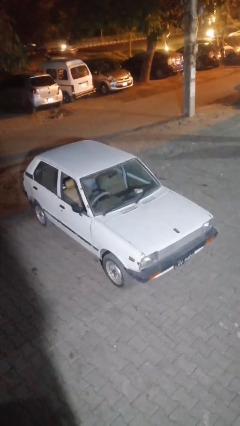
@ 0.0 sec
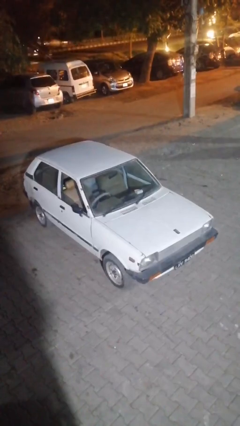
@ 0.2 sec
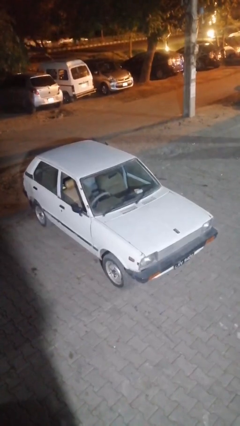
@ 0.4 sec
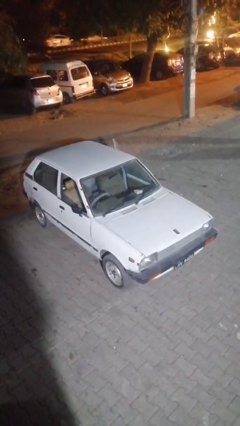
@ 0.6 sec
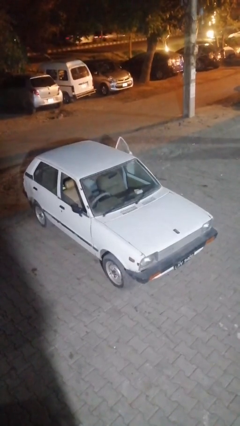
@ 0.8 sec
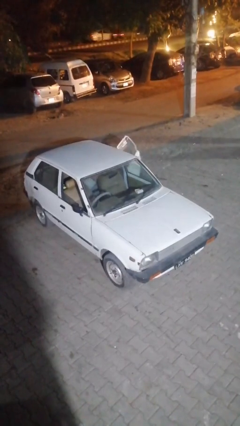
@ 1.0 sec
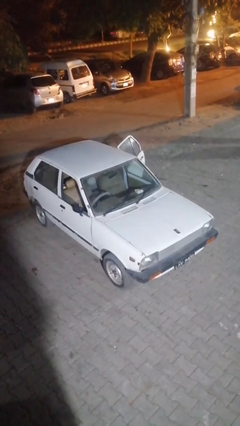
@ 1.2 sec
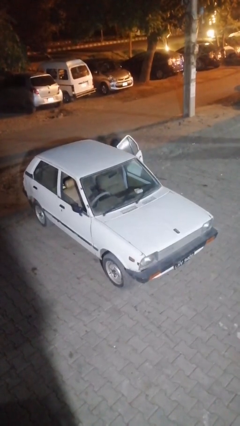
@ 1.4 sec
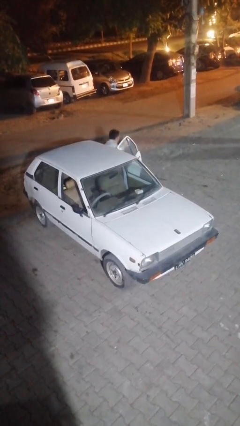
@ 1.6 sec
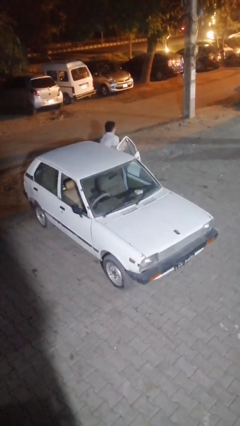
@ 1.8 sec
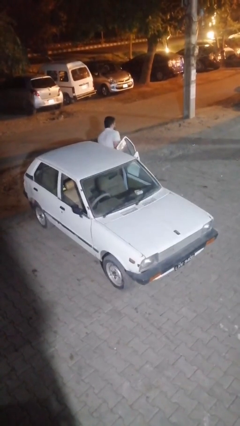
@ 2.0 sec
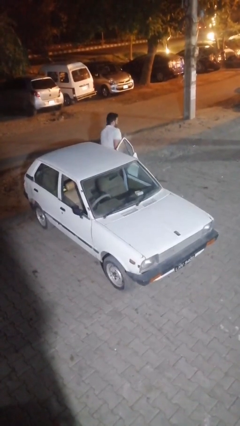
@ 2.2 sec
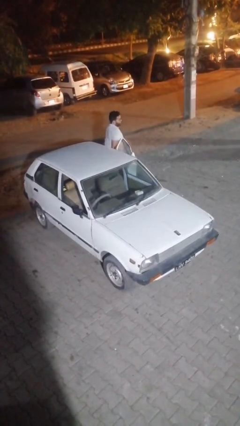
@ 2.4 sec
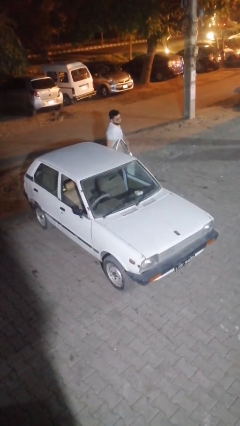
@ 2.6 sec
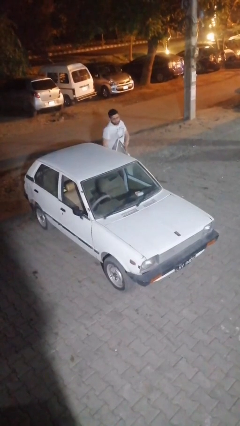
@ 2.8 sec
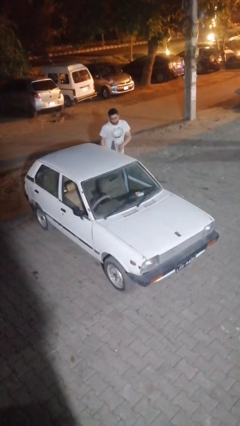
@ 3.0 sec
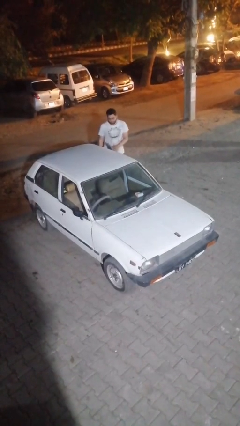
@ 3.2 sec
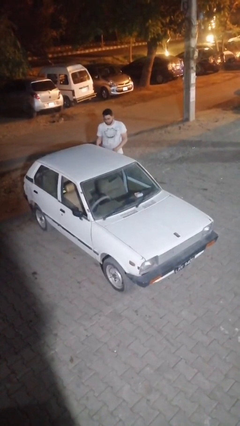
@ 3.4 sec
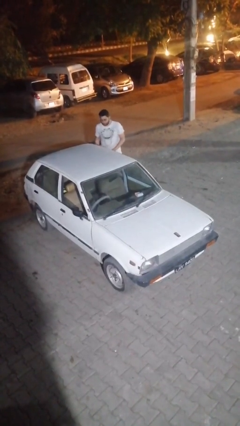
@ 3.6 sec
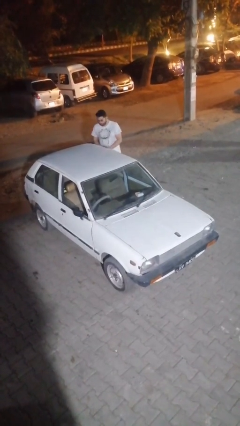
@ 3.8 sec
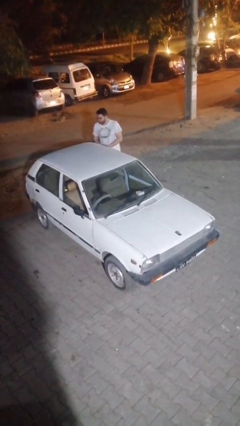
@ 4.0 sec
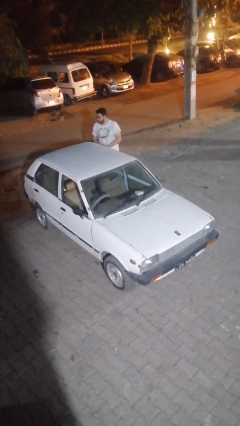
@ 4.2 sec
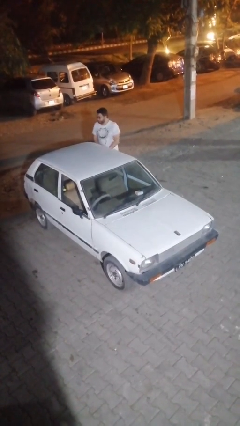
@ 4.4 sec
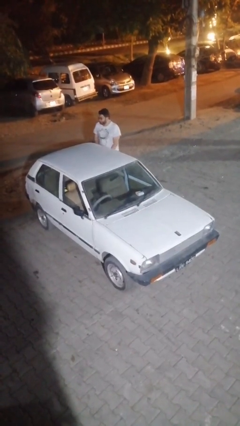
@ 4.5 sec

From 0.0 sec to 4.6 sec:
car drops off person

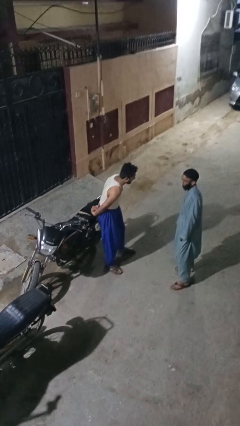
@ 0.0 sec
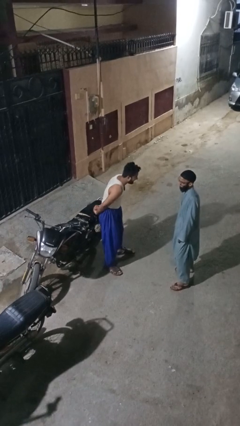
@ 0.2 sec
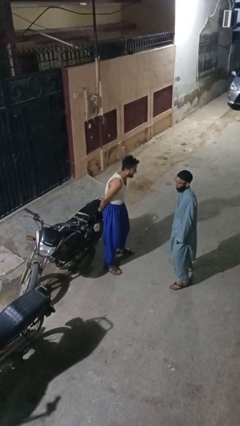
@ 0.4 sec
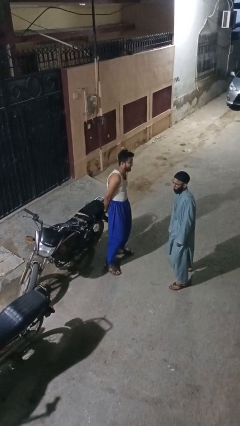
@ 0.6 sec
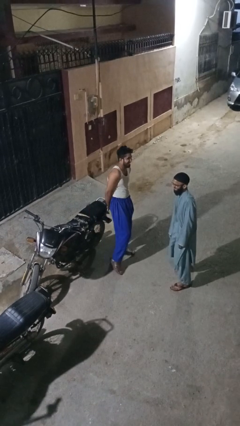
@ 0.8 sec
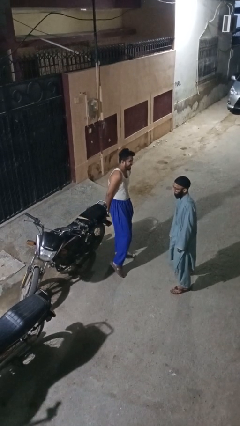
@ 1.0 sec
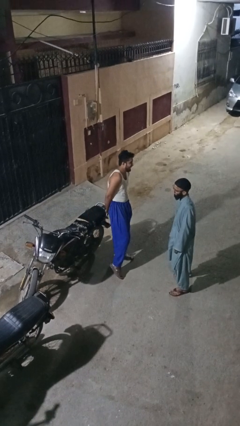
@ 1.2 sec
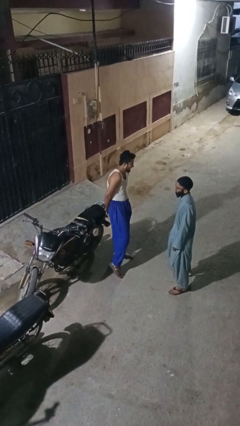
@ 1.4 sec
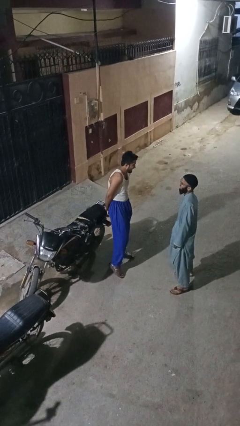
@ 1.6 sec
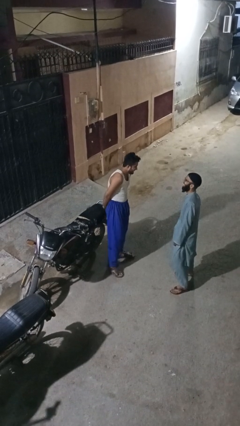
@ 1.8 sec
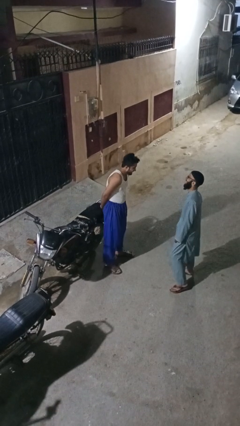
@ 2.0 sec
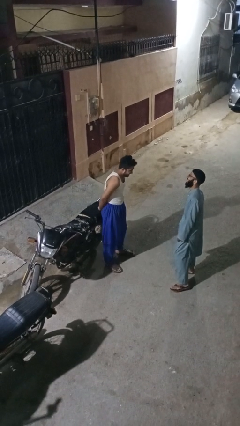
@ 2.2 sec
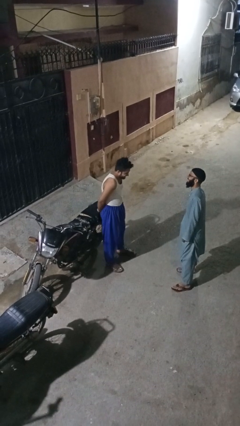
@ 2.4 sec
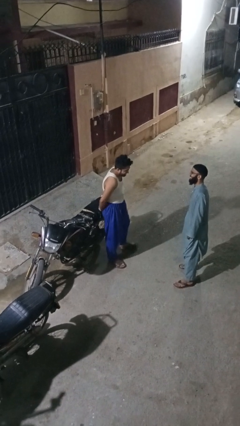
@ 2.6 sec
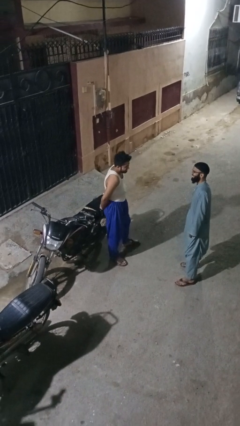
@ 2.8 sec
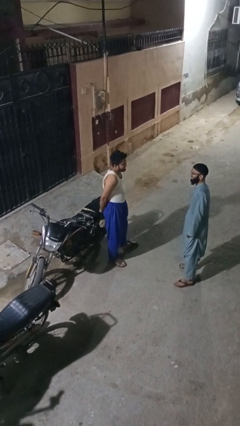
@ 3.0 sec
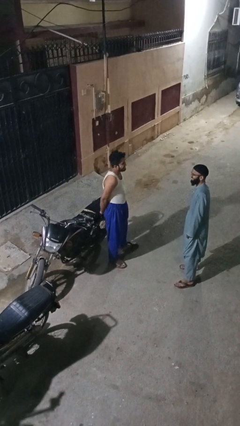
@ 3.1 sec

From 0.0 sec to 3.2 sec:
person laughs with person

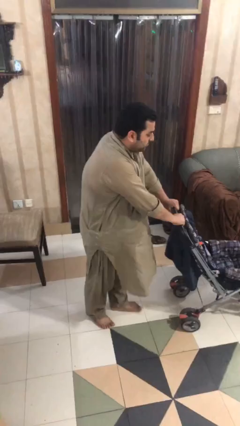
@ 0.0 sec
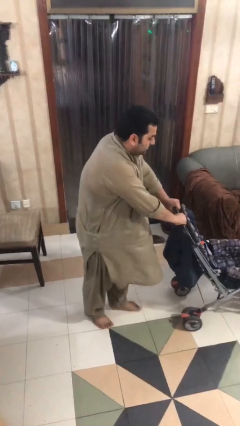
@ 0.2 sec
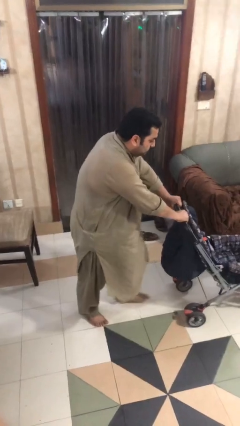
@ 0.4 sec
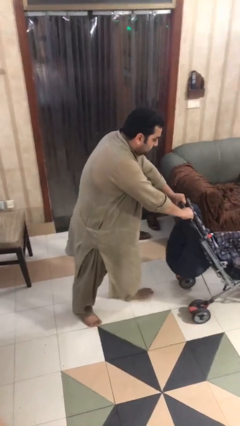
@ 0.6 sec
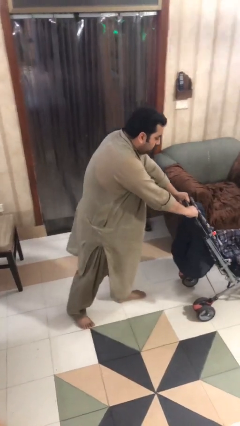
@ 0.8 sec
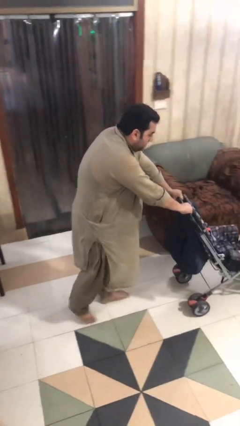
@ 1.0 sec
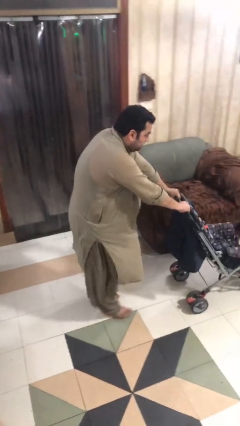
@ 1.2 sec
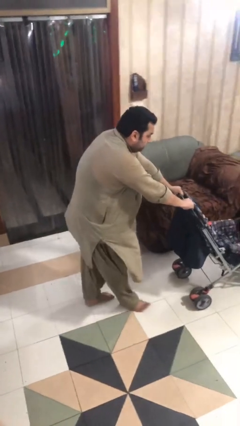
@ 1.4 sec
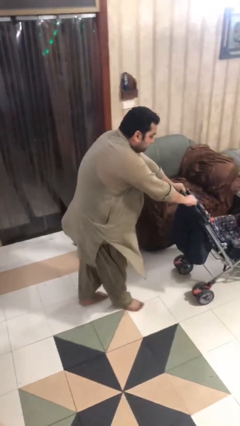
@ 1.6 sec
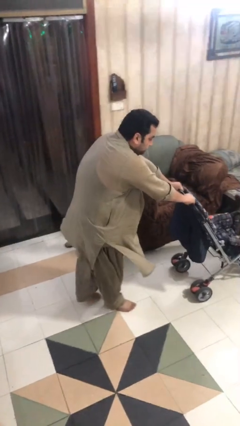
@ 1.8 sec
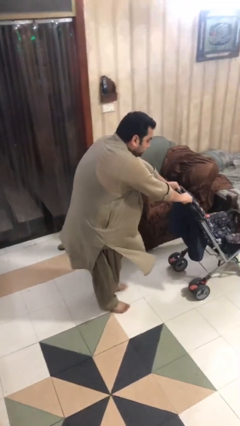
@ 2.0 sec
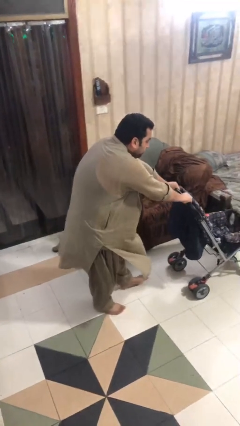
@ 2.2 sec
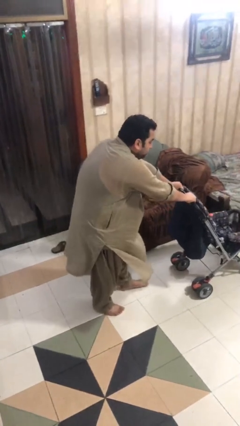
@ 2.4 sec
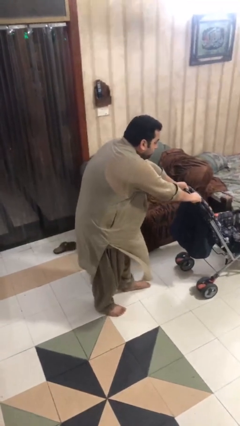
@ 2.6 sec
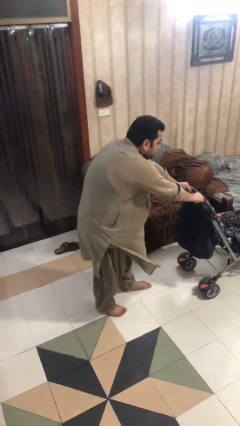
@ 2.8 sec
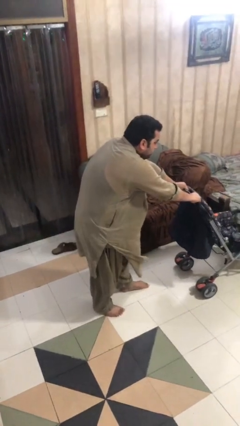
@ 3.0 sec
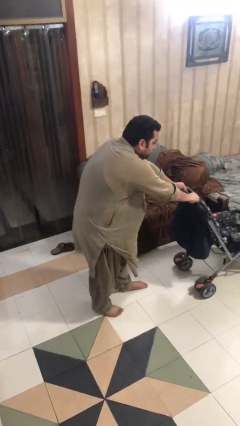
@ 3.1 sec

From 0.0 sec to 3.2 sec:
person pushes wheeled cart

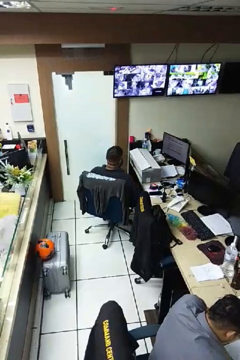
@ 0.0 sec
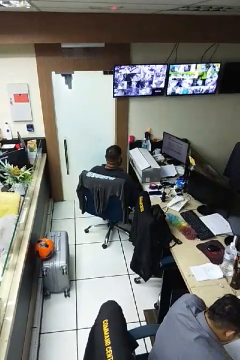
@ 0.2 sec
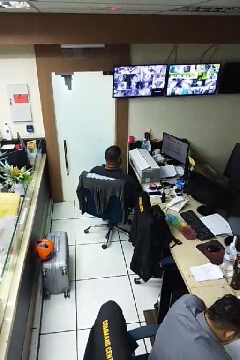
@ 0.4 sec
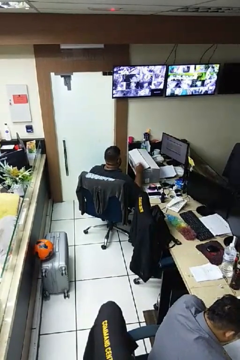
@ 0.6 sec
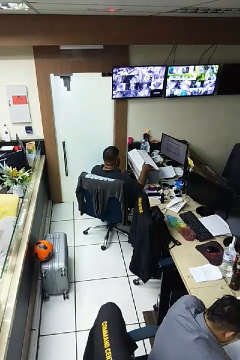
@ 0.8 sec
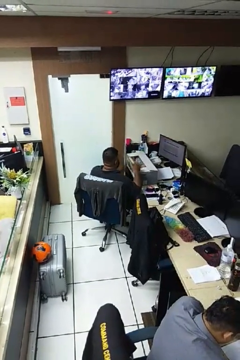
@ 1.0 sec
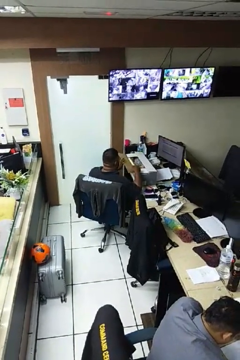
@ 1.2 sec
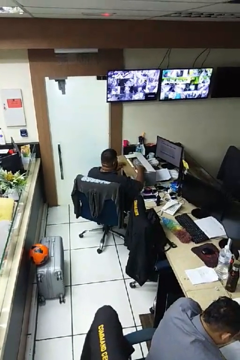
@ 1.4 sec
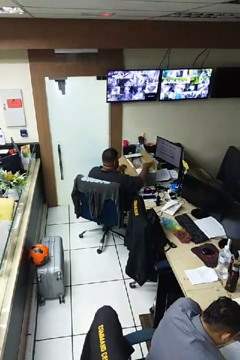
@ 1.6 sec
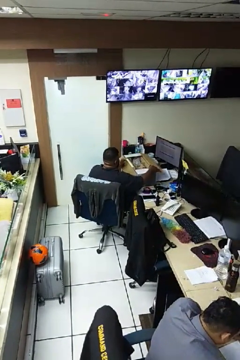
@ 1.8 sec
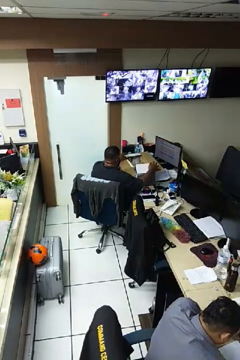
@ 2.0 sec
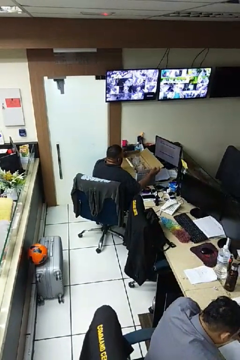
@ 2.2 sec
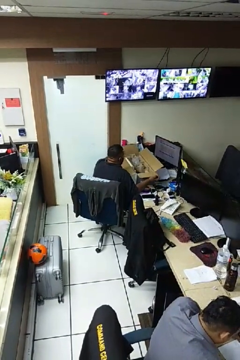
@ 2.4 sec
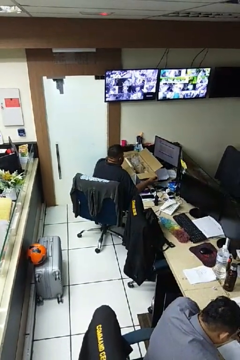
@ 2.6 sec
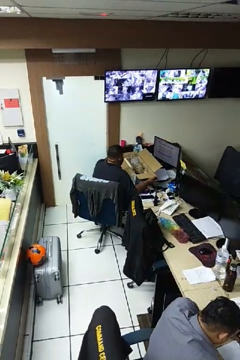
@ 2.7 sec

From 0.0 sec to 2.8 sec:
person opens box

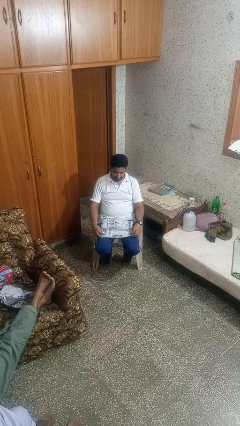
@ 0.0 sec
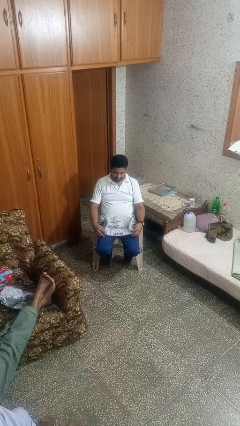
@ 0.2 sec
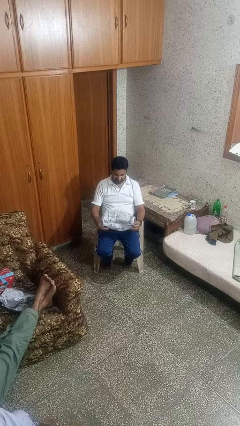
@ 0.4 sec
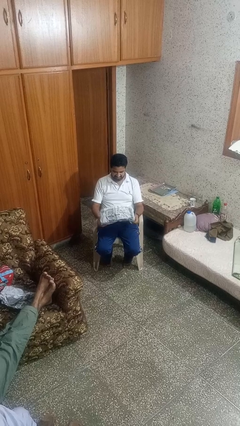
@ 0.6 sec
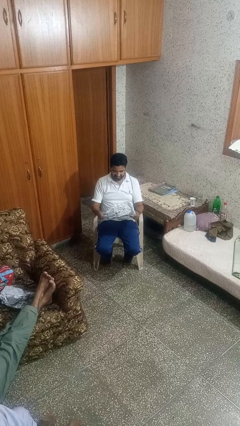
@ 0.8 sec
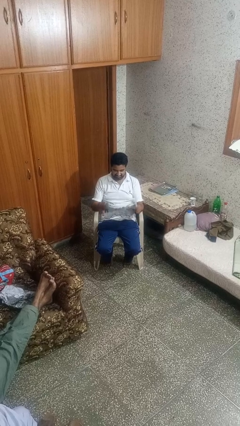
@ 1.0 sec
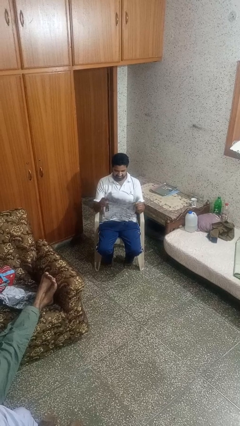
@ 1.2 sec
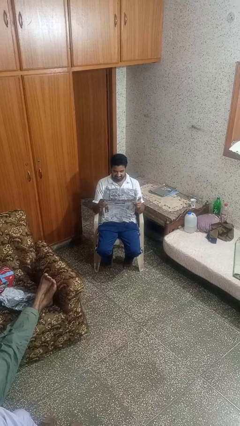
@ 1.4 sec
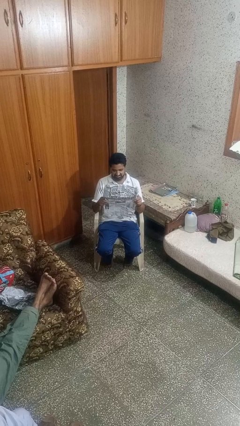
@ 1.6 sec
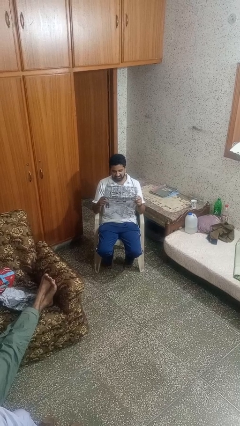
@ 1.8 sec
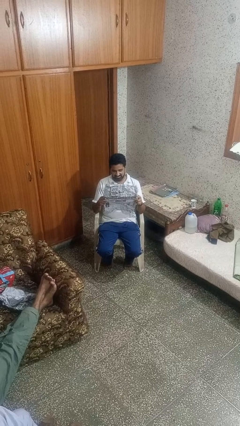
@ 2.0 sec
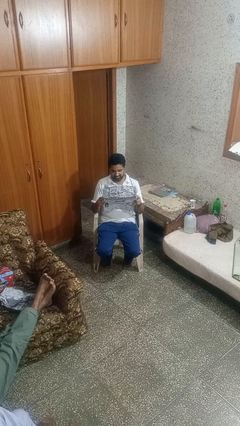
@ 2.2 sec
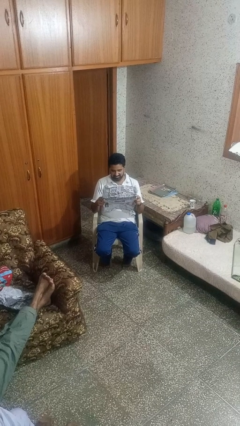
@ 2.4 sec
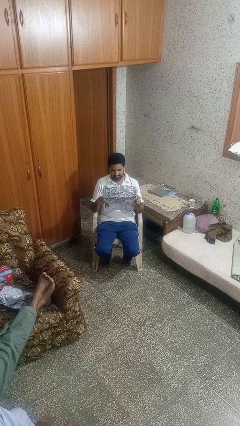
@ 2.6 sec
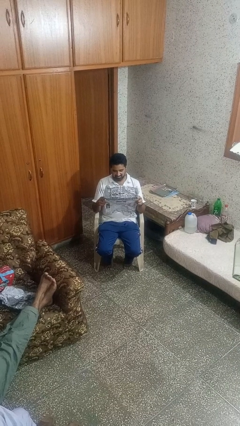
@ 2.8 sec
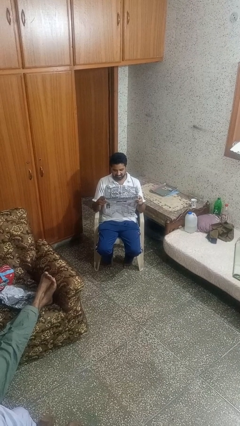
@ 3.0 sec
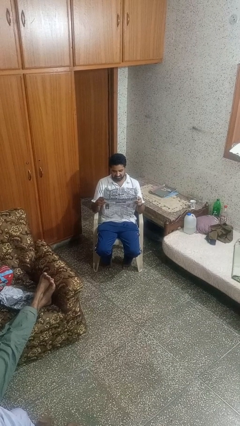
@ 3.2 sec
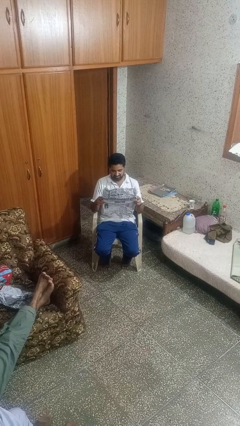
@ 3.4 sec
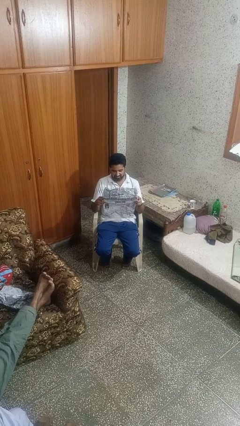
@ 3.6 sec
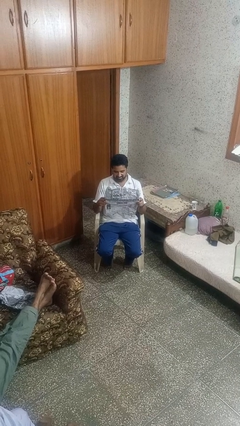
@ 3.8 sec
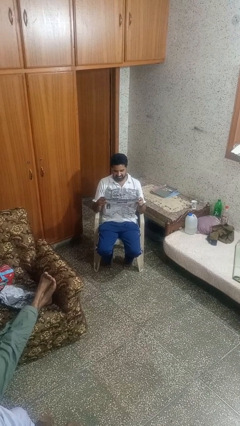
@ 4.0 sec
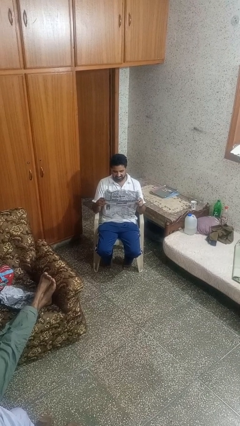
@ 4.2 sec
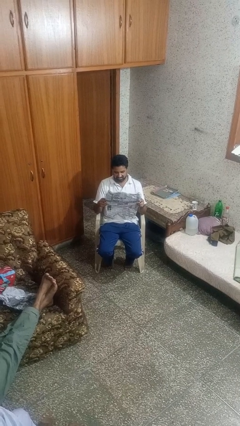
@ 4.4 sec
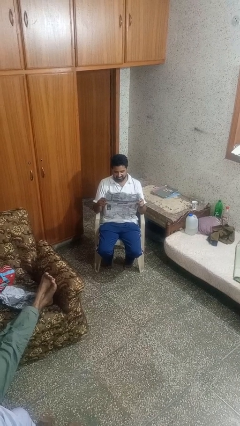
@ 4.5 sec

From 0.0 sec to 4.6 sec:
person reads newspaper
